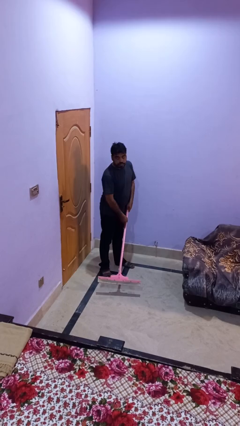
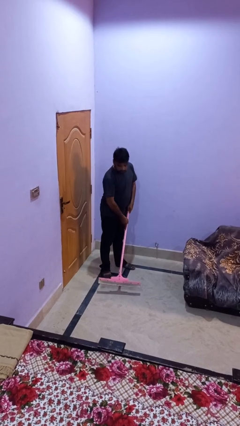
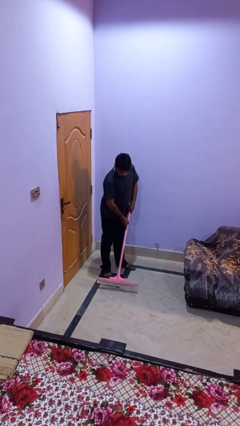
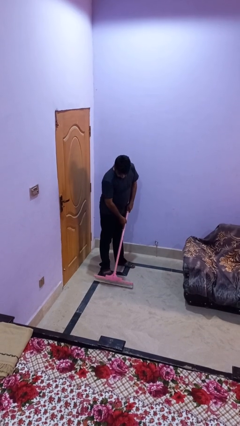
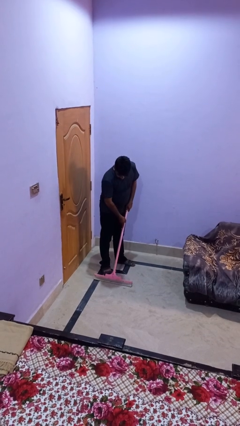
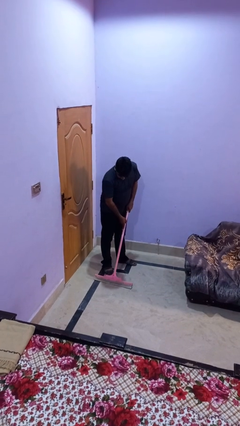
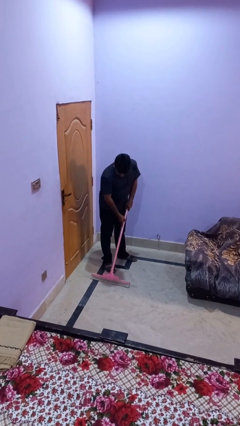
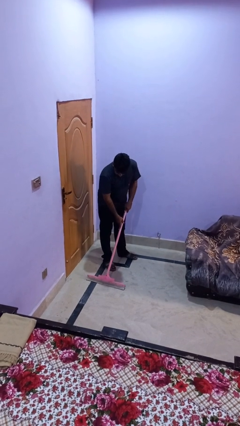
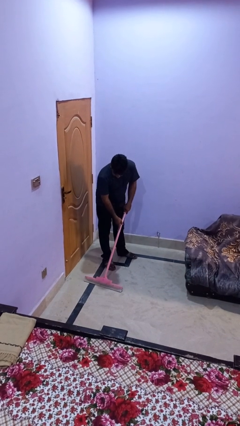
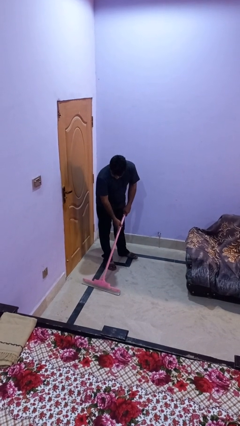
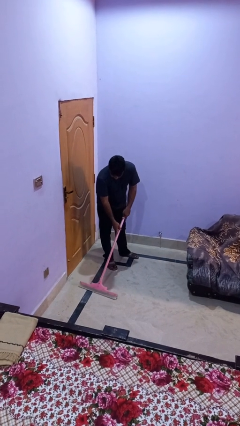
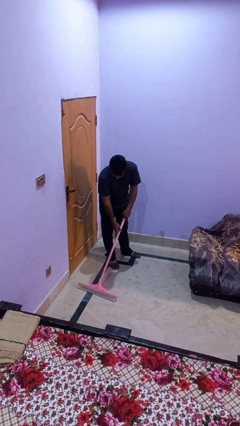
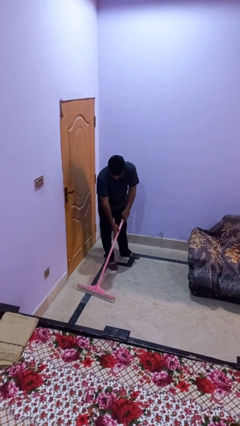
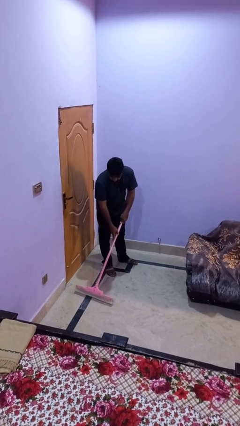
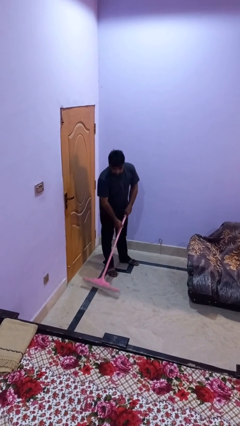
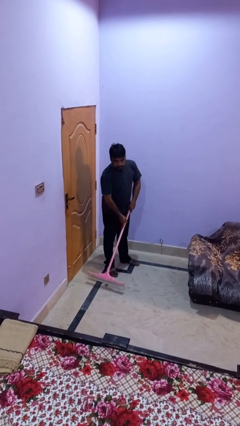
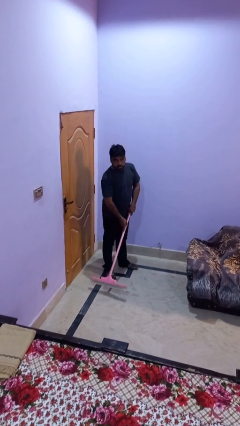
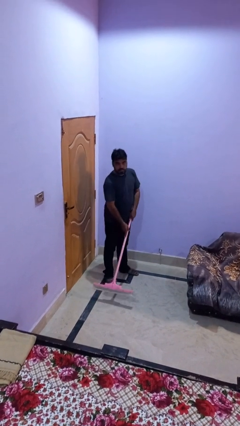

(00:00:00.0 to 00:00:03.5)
person vacuums carpet

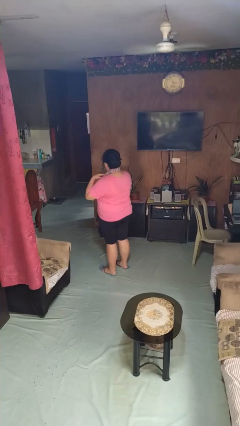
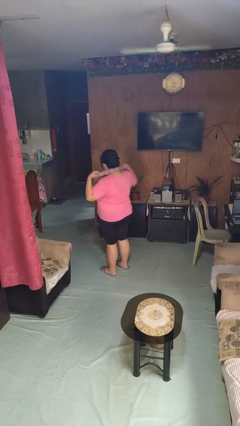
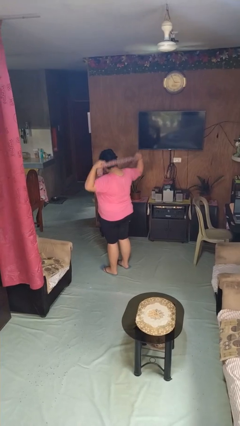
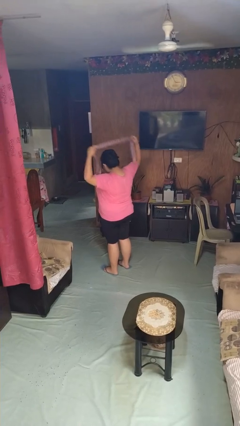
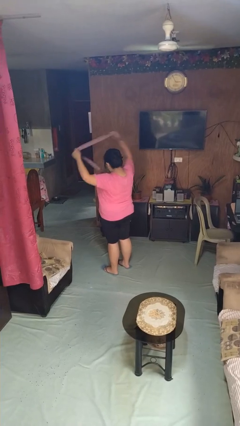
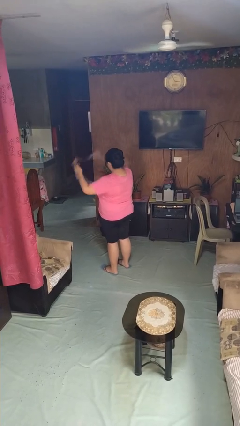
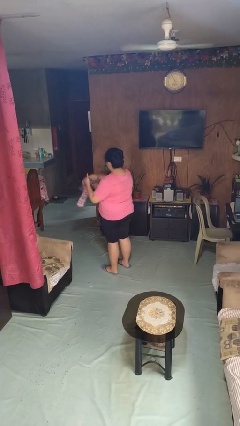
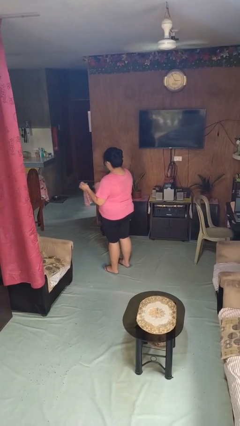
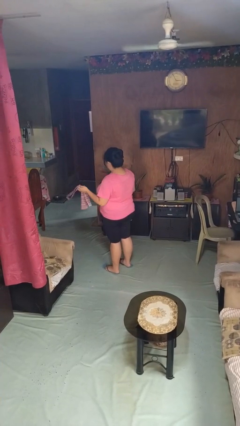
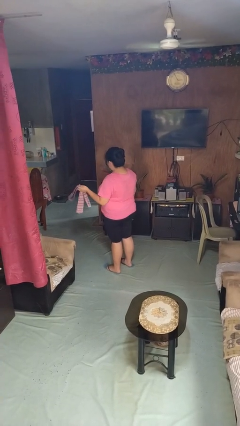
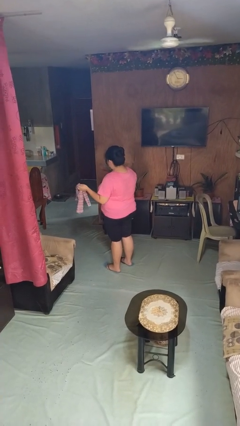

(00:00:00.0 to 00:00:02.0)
person takes off necktie

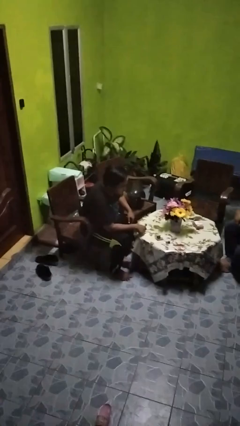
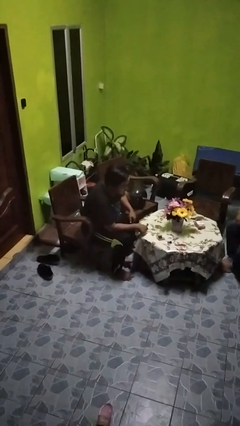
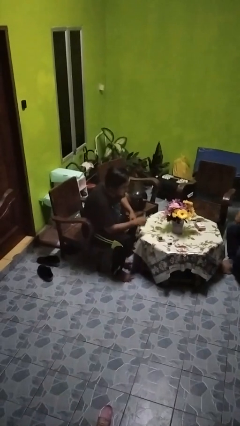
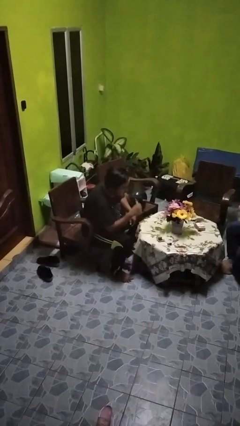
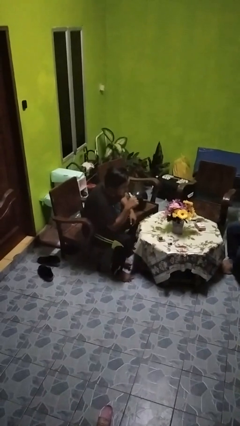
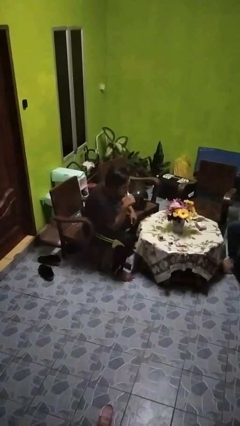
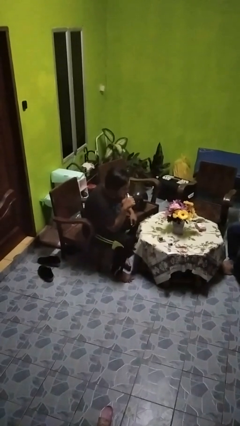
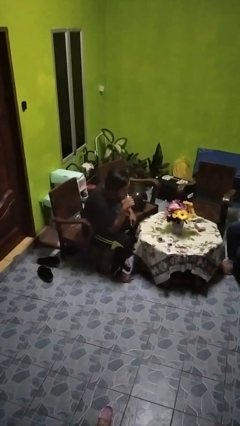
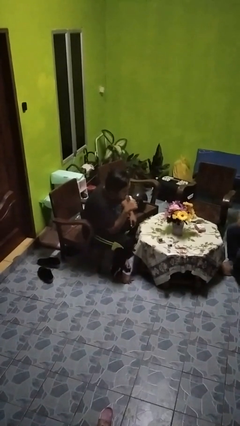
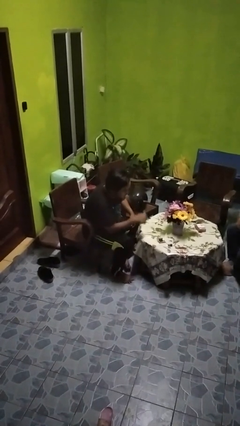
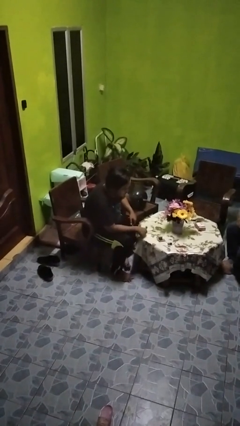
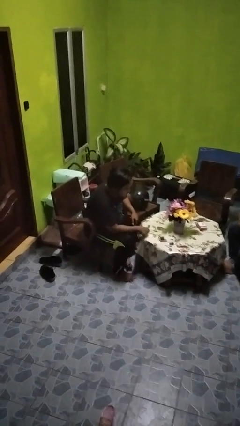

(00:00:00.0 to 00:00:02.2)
person vapes

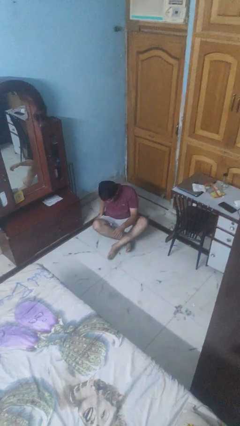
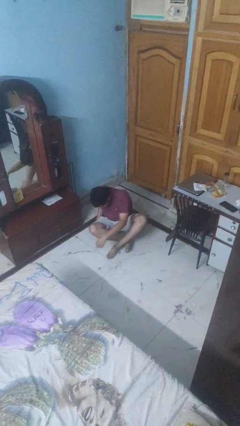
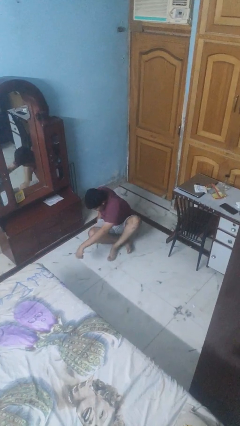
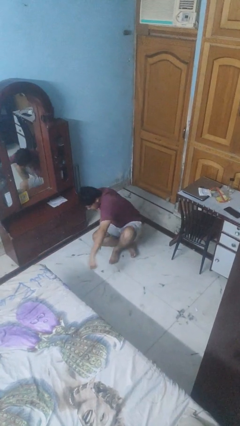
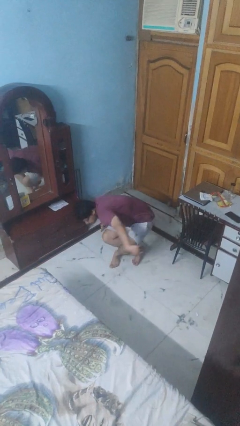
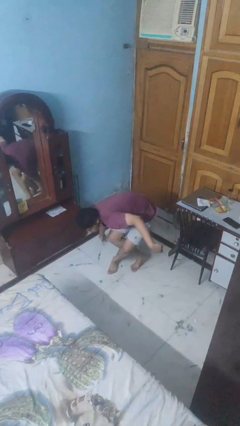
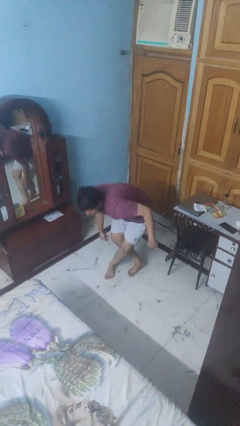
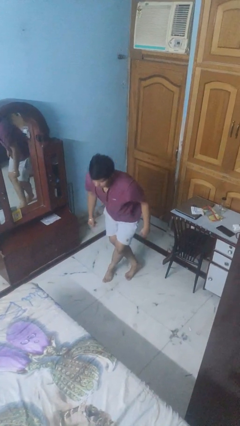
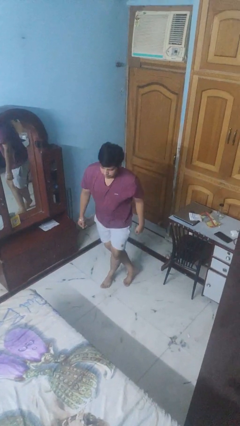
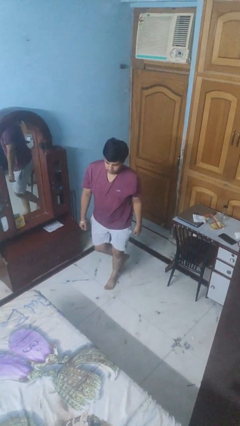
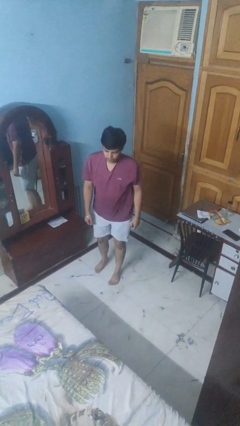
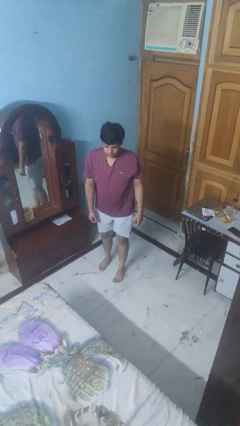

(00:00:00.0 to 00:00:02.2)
person stands up from floor

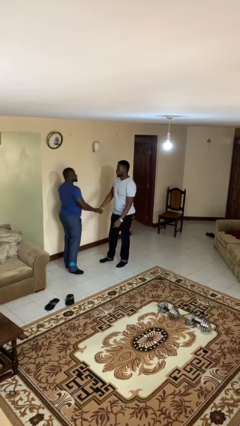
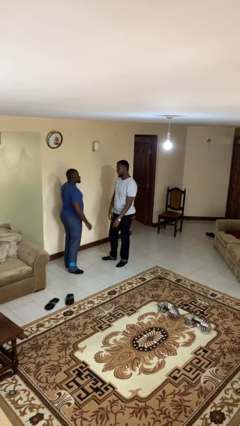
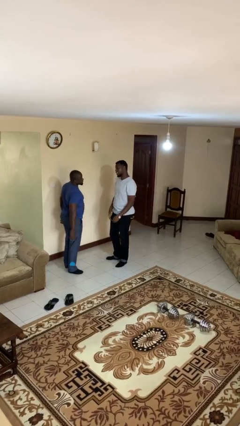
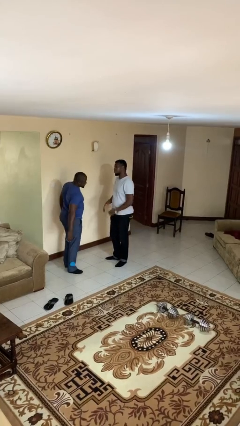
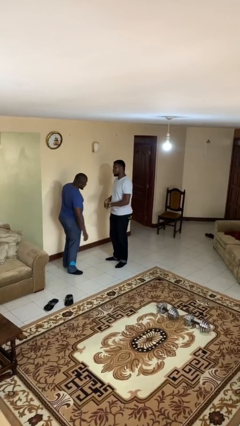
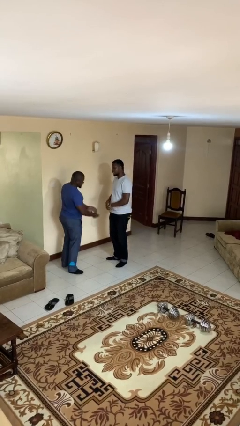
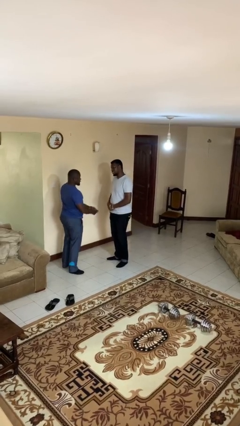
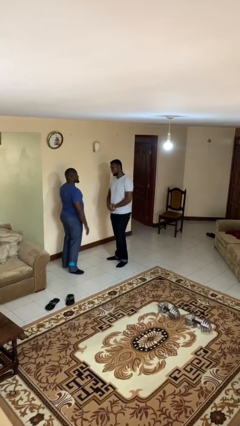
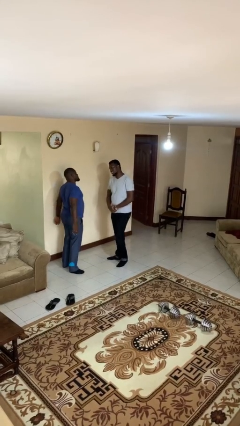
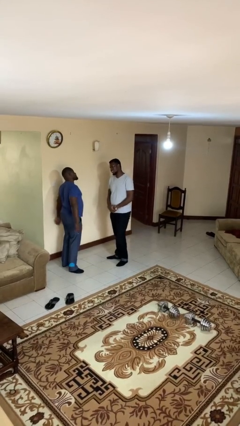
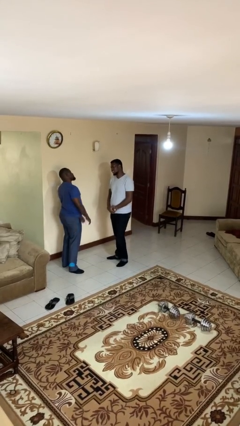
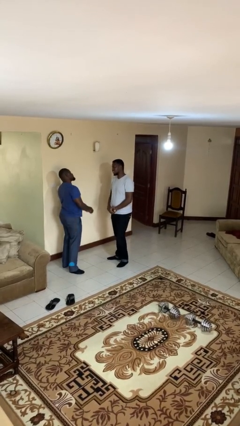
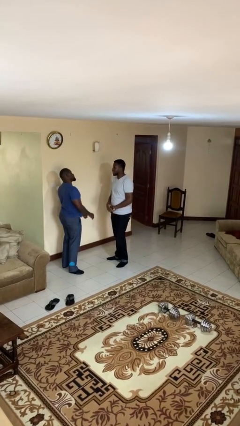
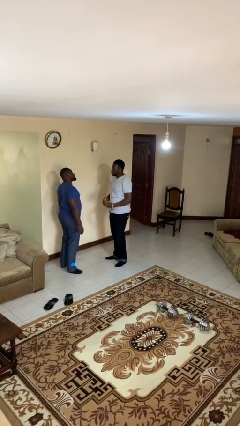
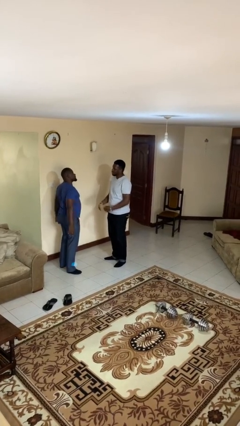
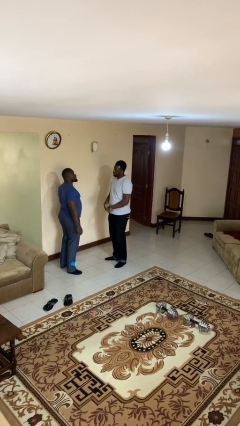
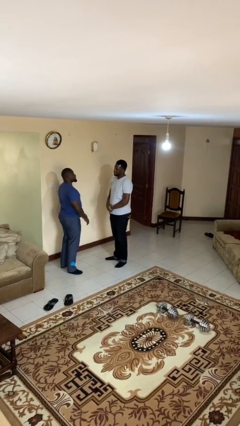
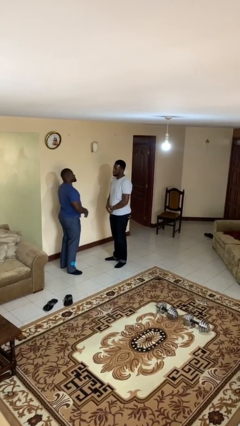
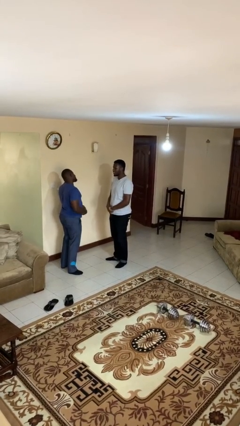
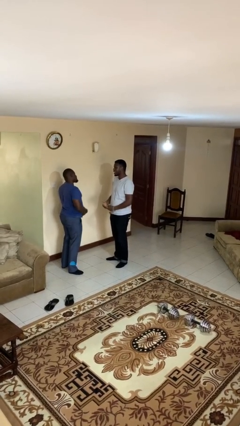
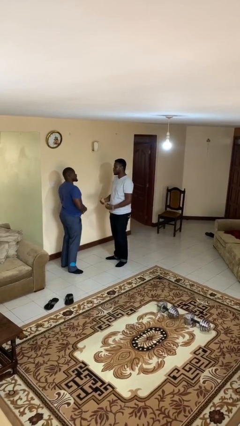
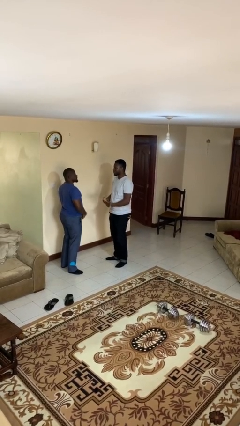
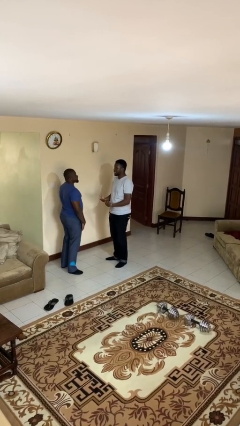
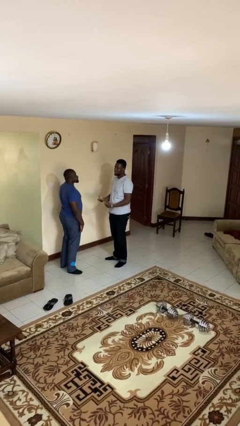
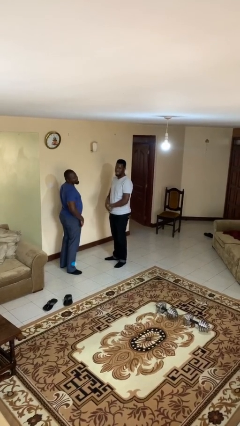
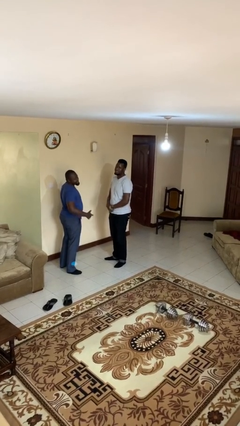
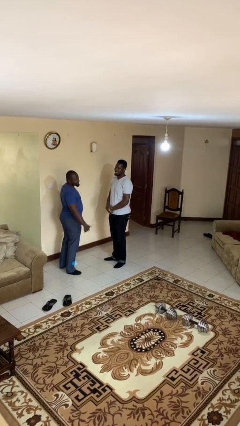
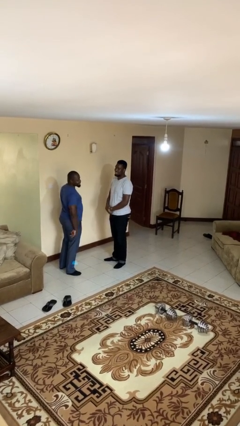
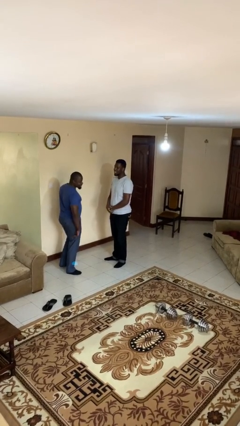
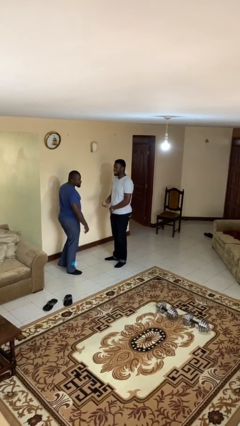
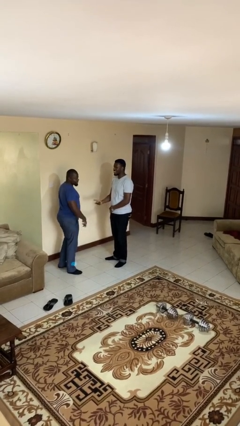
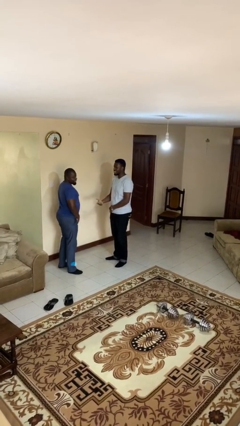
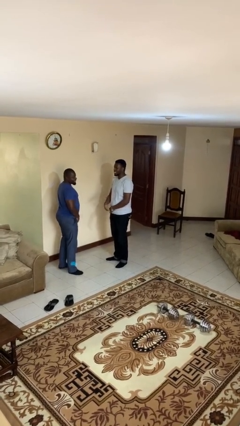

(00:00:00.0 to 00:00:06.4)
person talks to person

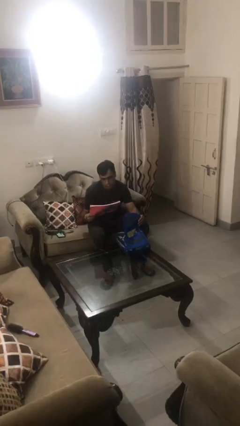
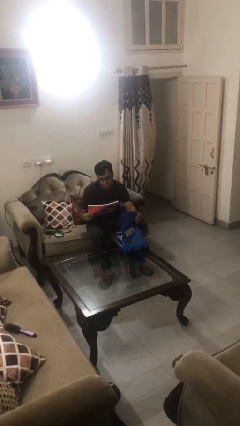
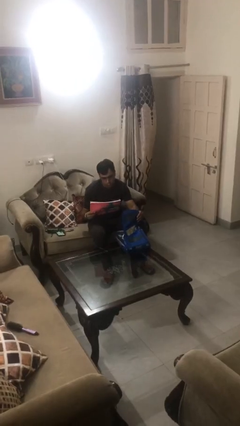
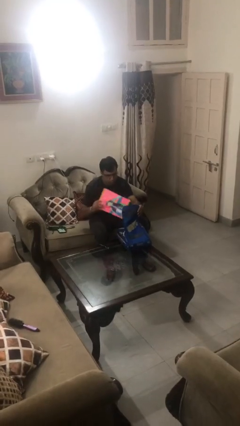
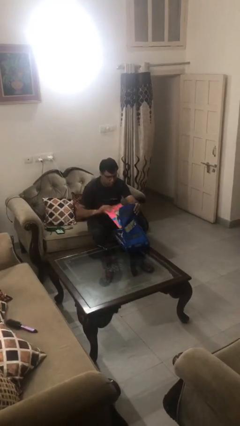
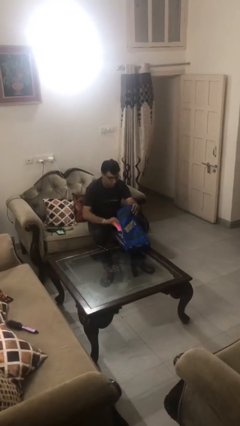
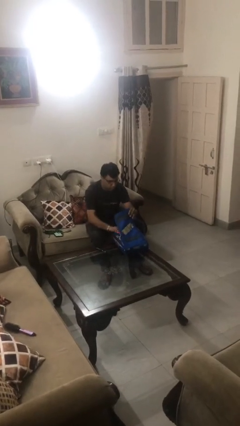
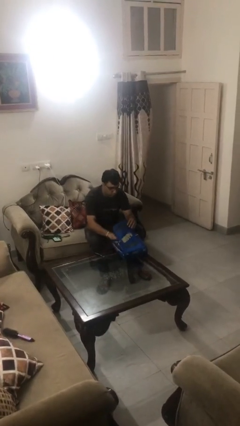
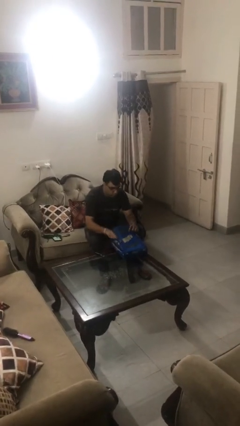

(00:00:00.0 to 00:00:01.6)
person puts object into backpack
